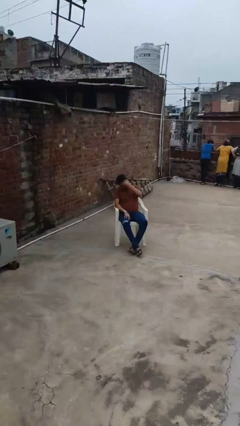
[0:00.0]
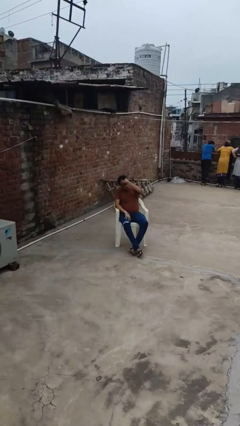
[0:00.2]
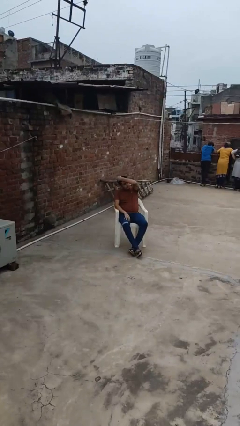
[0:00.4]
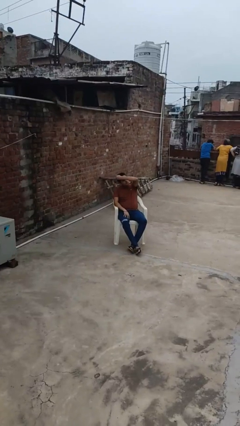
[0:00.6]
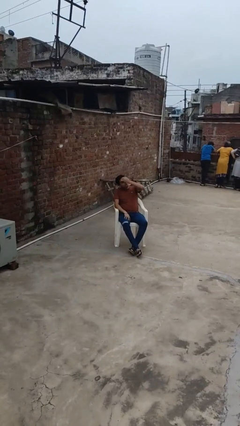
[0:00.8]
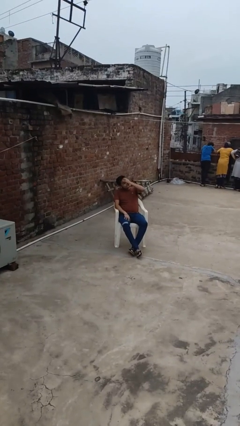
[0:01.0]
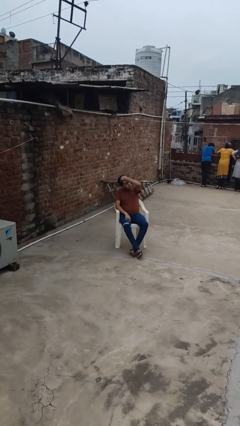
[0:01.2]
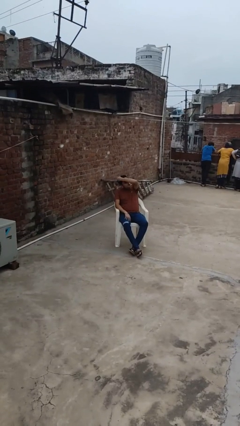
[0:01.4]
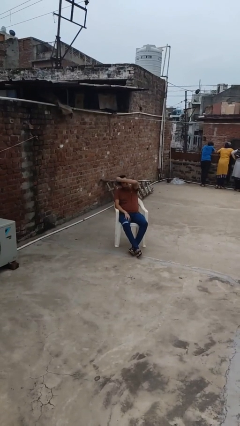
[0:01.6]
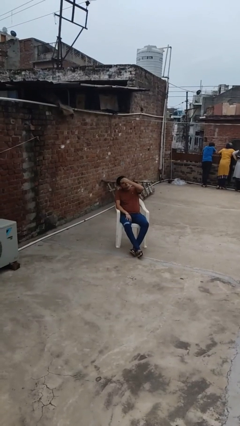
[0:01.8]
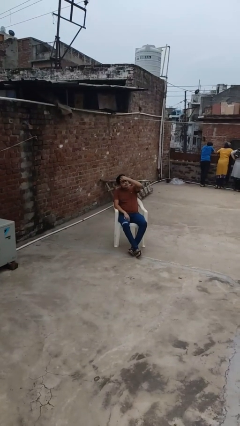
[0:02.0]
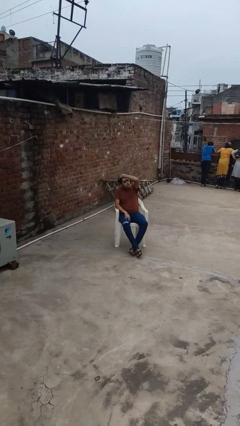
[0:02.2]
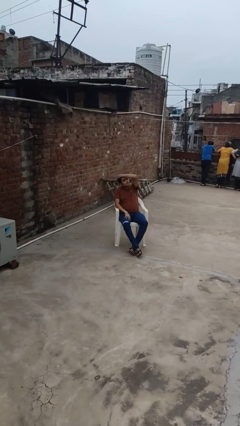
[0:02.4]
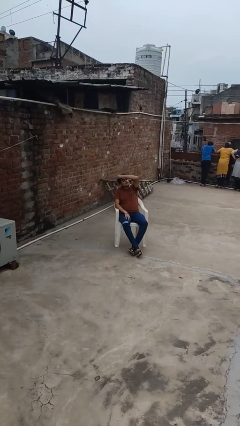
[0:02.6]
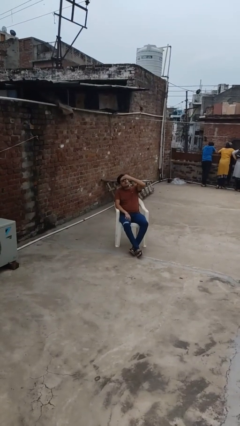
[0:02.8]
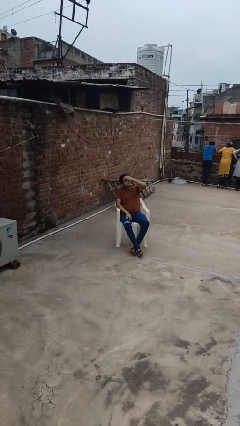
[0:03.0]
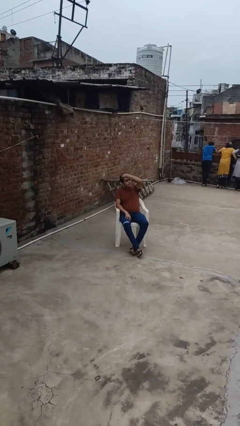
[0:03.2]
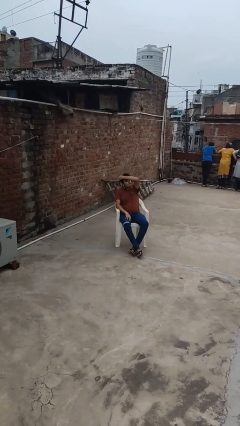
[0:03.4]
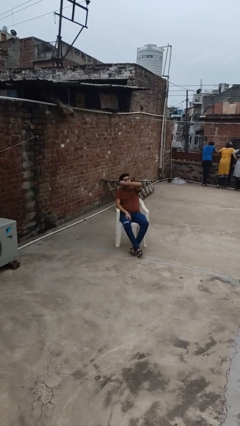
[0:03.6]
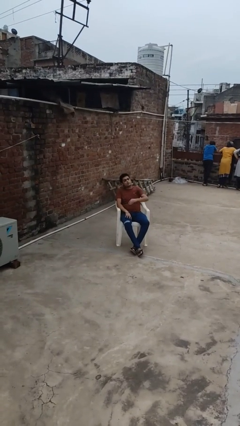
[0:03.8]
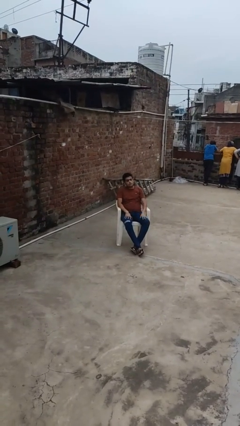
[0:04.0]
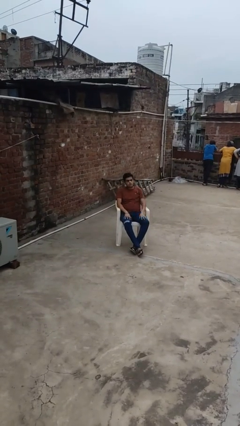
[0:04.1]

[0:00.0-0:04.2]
person strokes hair

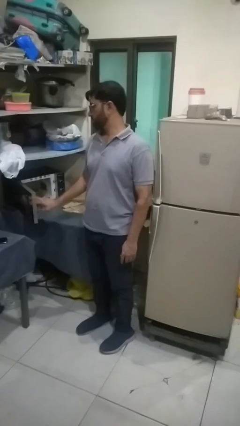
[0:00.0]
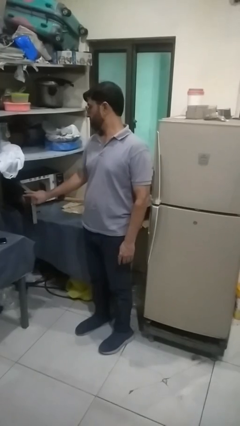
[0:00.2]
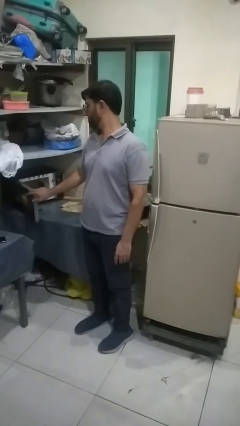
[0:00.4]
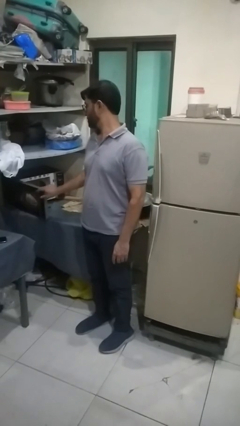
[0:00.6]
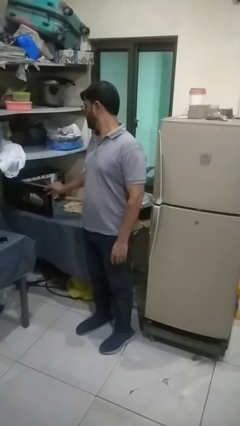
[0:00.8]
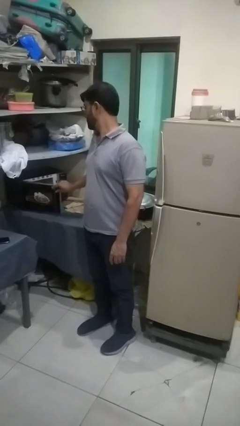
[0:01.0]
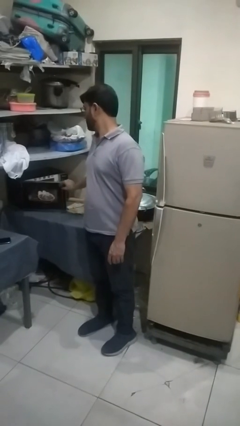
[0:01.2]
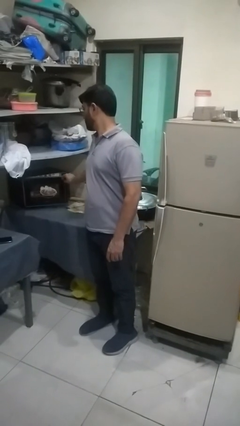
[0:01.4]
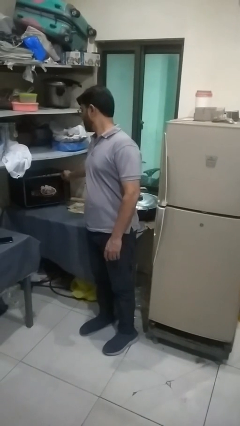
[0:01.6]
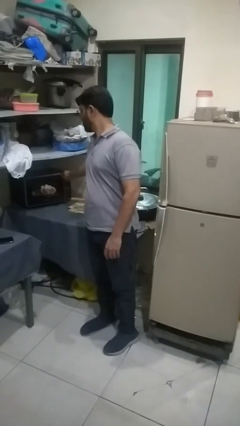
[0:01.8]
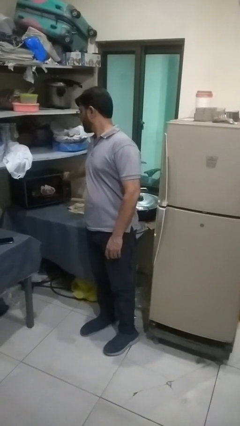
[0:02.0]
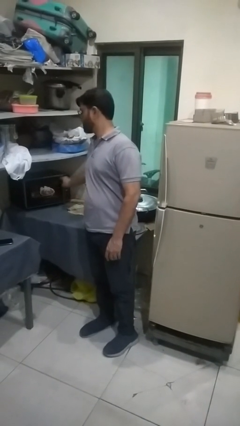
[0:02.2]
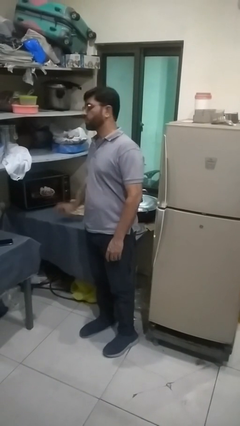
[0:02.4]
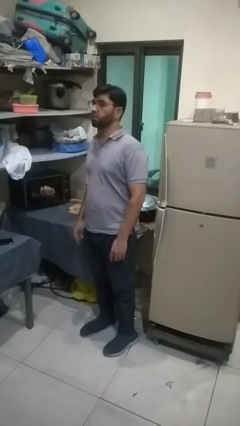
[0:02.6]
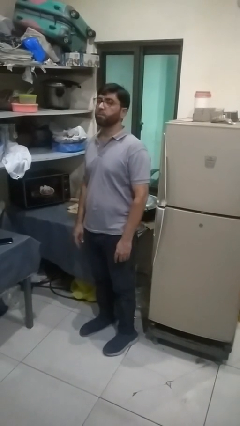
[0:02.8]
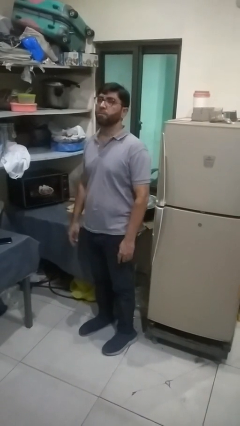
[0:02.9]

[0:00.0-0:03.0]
person closes oven door

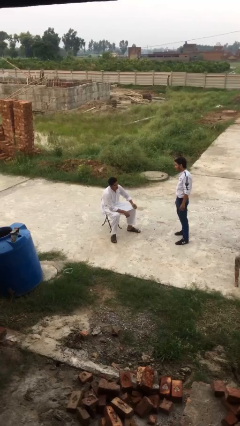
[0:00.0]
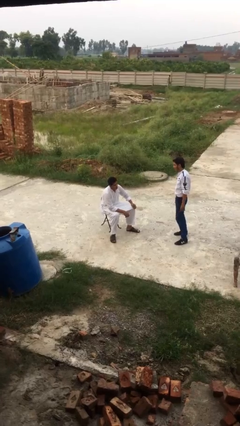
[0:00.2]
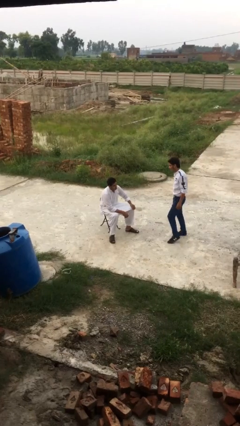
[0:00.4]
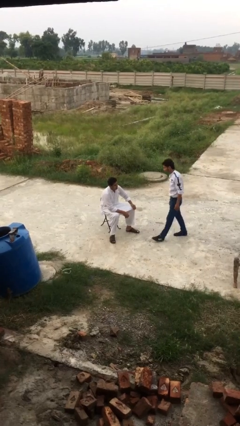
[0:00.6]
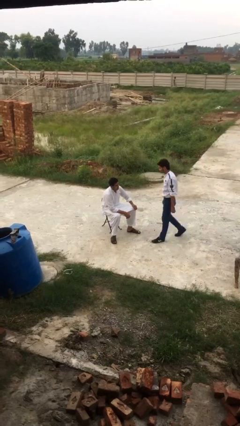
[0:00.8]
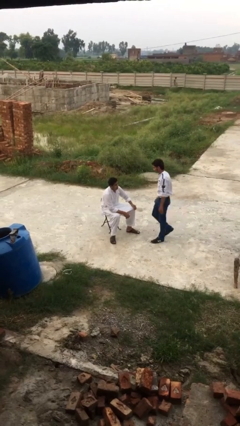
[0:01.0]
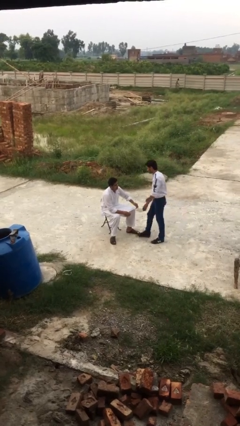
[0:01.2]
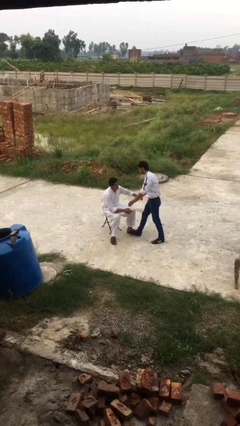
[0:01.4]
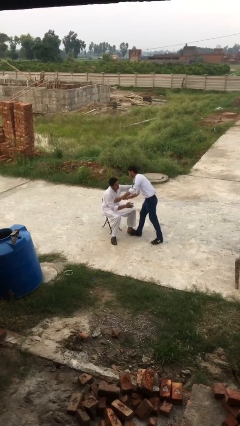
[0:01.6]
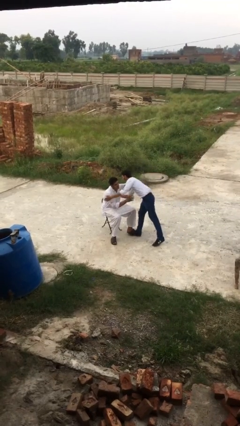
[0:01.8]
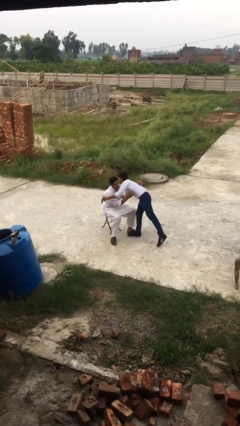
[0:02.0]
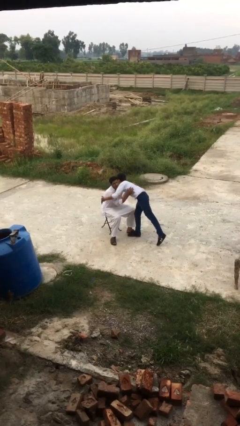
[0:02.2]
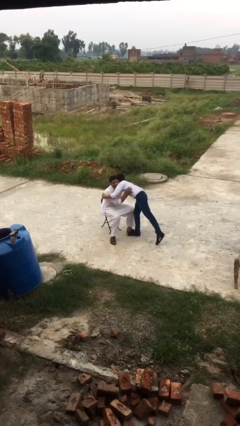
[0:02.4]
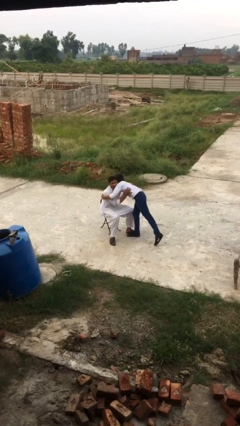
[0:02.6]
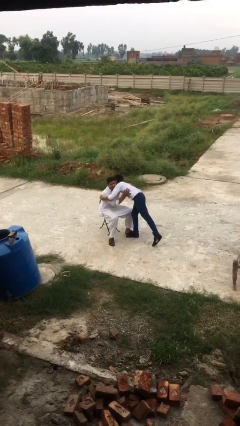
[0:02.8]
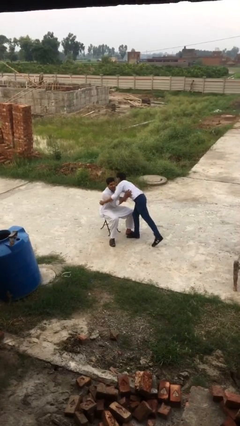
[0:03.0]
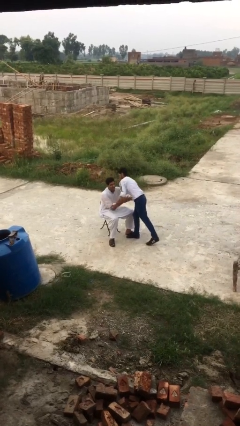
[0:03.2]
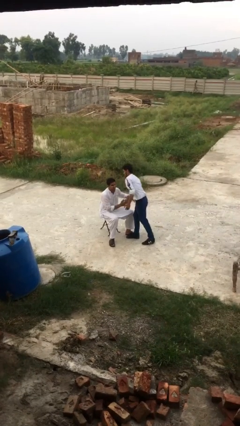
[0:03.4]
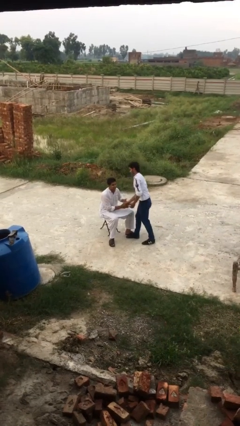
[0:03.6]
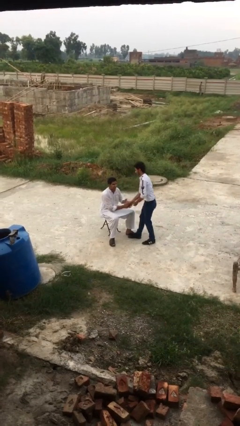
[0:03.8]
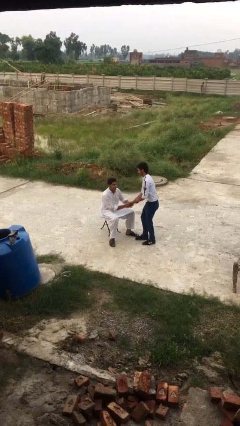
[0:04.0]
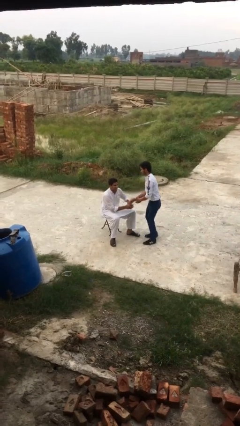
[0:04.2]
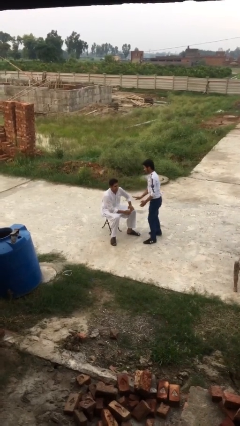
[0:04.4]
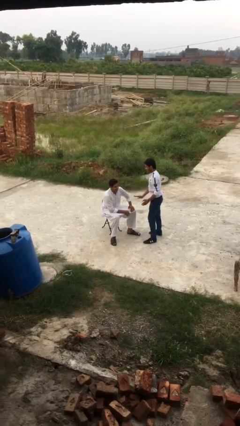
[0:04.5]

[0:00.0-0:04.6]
person embraces person

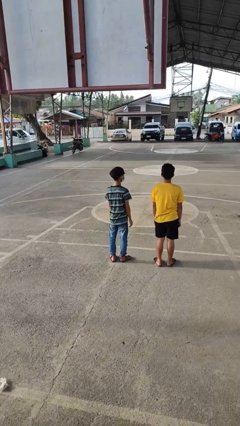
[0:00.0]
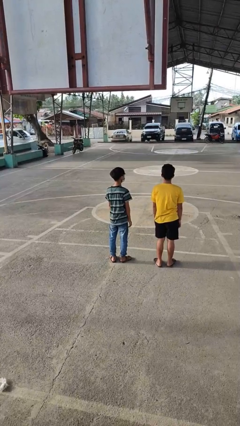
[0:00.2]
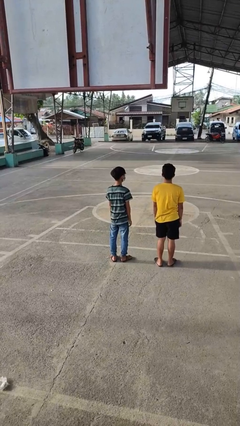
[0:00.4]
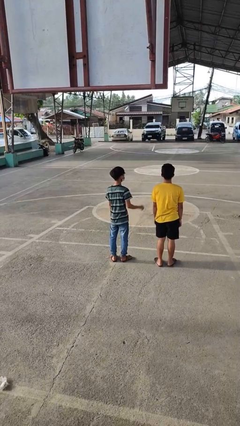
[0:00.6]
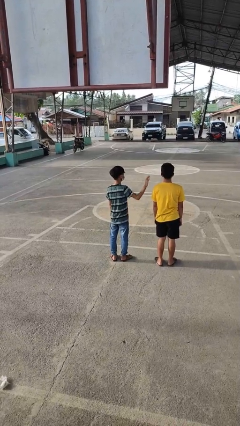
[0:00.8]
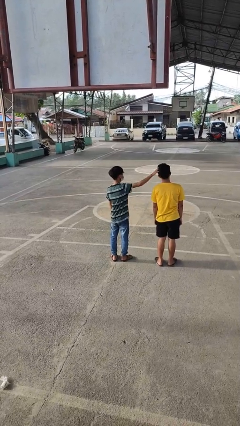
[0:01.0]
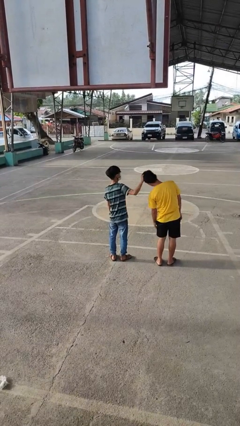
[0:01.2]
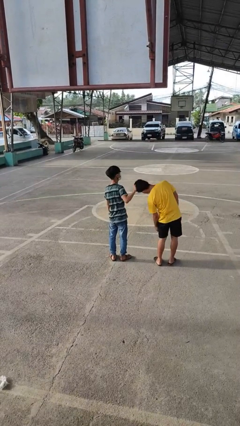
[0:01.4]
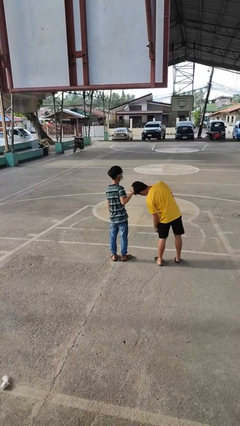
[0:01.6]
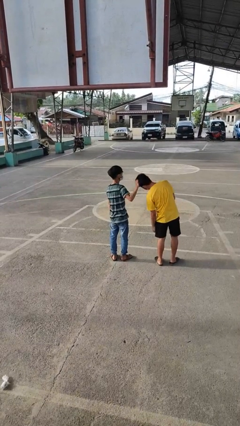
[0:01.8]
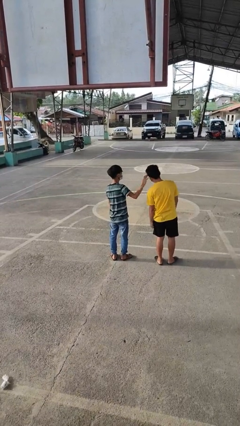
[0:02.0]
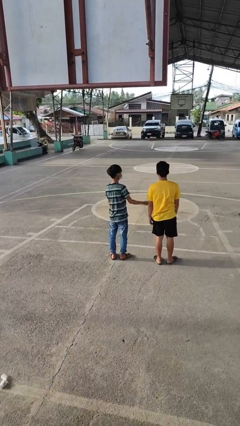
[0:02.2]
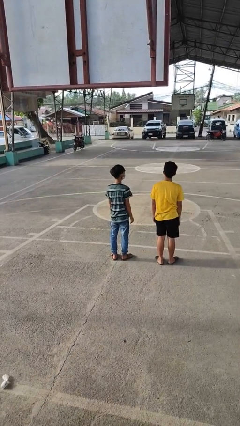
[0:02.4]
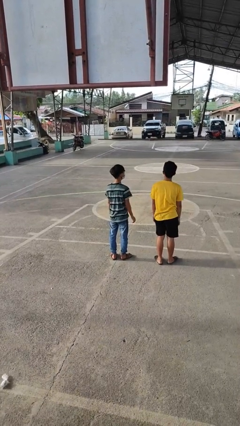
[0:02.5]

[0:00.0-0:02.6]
person grabs person by hair

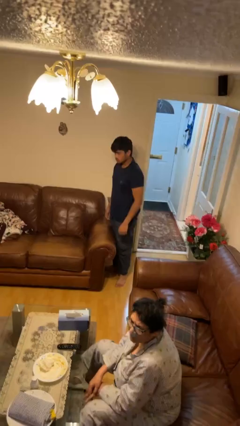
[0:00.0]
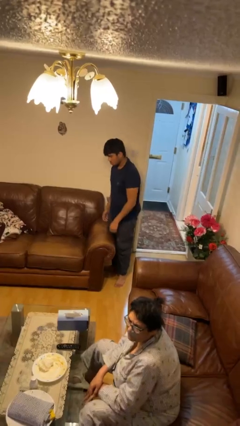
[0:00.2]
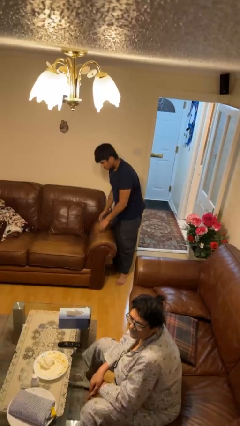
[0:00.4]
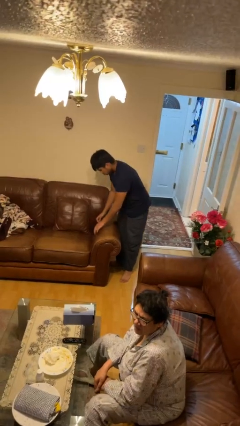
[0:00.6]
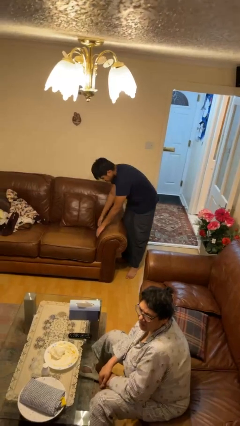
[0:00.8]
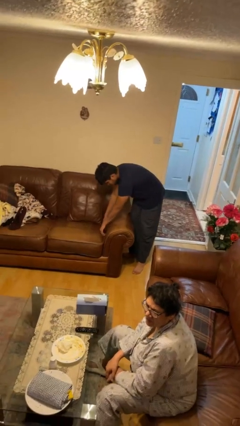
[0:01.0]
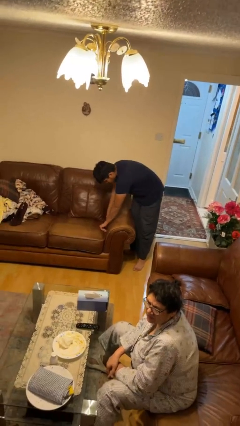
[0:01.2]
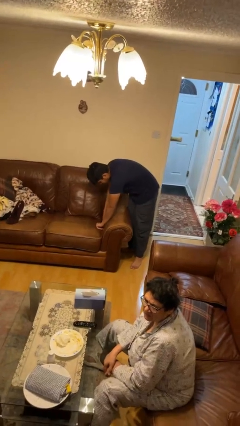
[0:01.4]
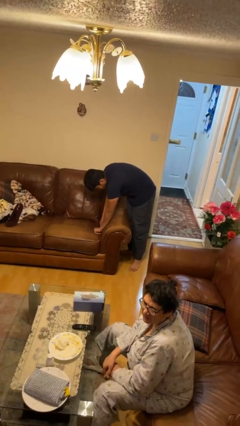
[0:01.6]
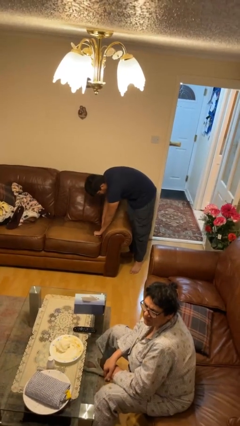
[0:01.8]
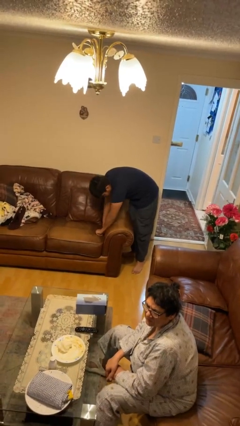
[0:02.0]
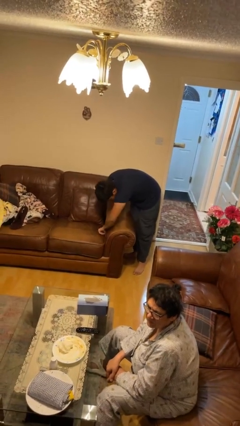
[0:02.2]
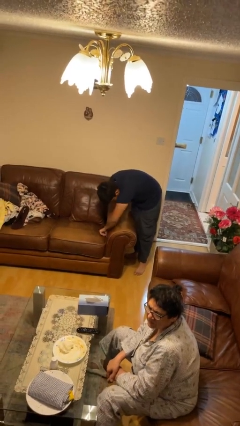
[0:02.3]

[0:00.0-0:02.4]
person searches in couch

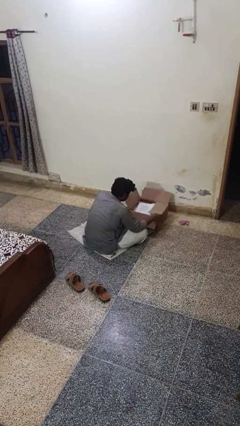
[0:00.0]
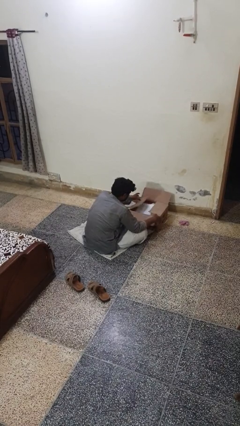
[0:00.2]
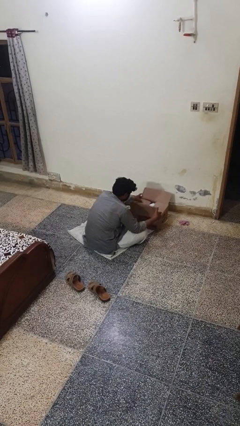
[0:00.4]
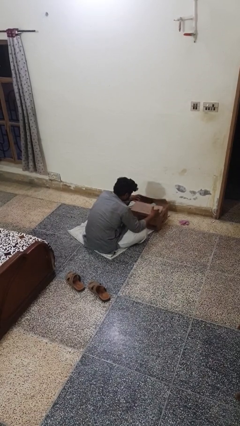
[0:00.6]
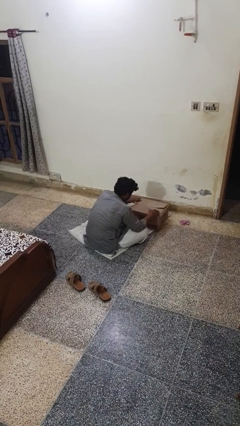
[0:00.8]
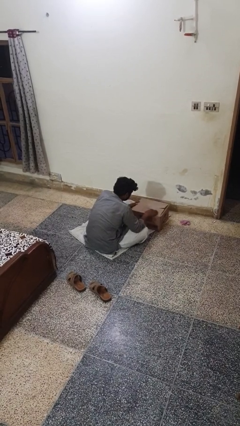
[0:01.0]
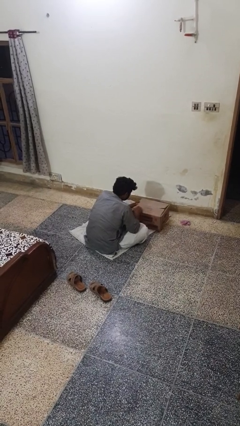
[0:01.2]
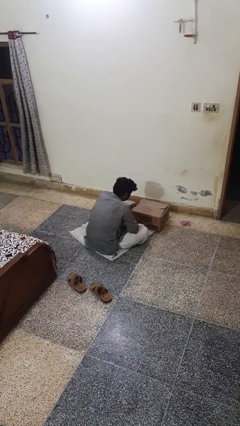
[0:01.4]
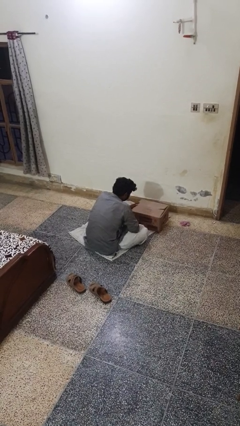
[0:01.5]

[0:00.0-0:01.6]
person closes box
